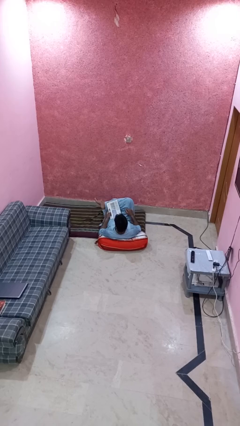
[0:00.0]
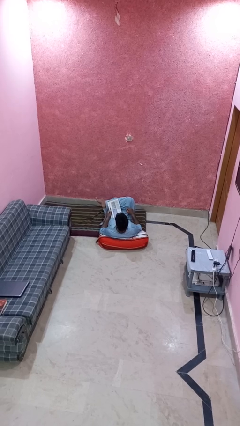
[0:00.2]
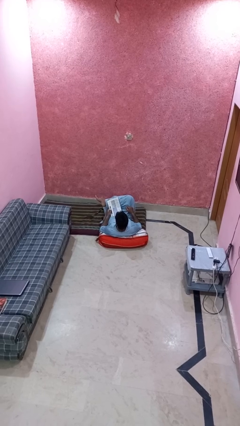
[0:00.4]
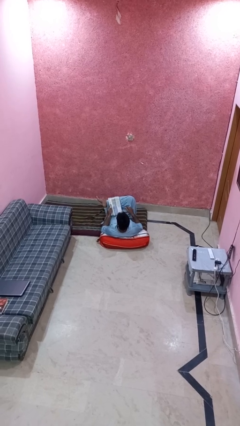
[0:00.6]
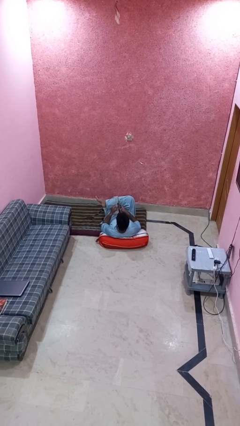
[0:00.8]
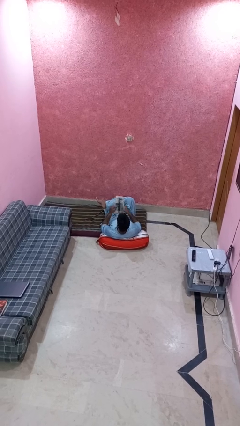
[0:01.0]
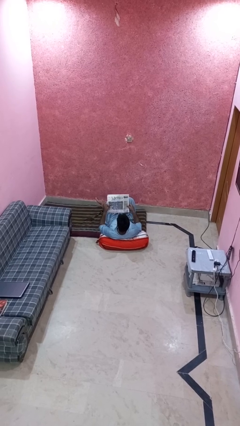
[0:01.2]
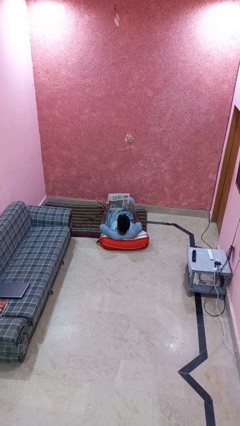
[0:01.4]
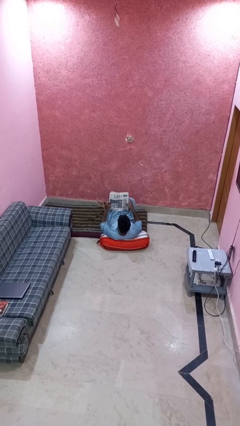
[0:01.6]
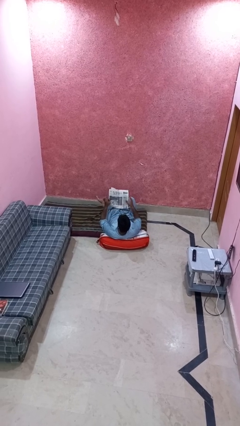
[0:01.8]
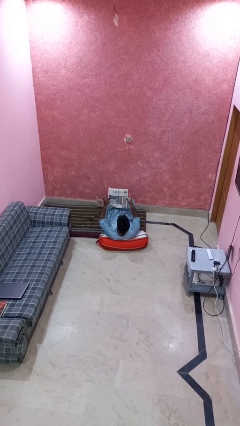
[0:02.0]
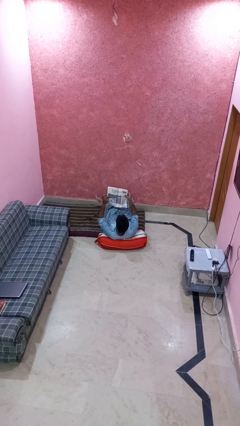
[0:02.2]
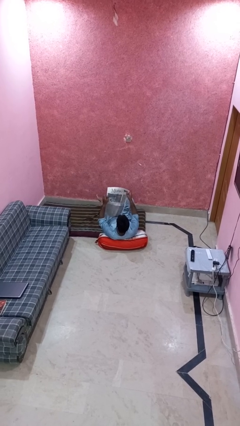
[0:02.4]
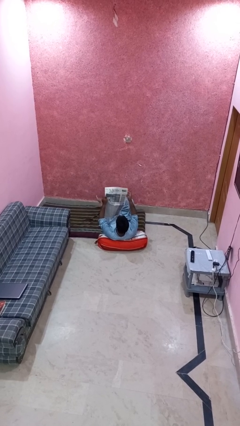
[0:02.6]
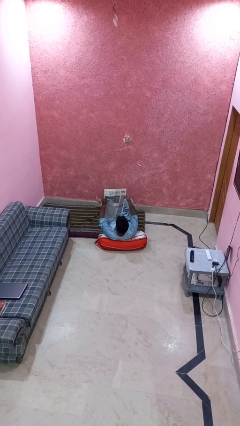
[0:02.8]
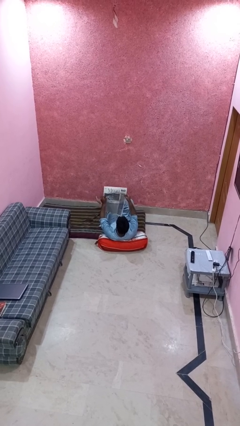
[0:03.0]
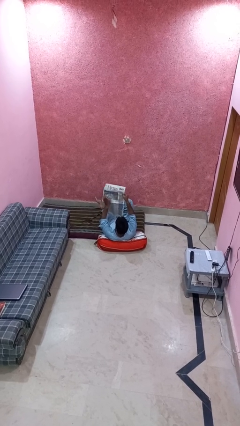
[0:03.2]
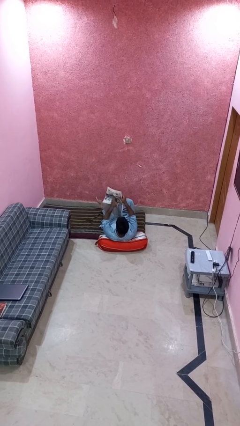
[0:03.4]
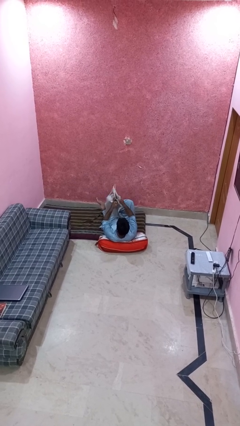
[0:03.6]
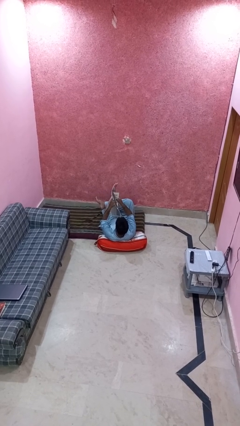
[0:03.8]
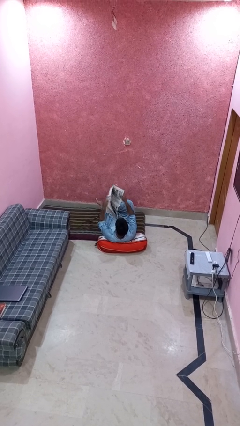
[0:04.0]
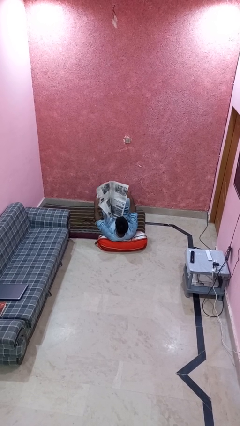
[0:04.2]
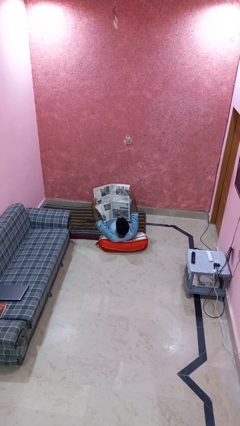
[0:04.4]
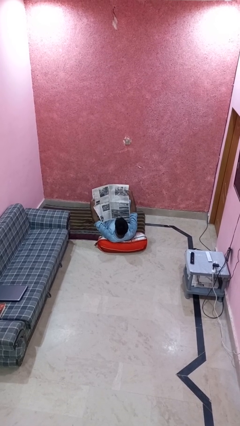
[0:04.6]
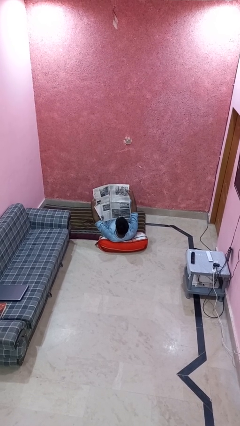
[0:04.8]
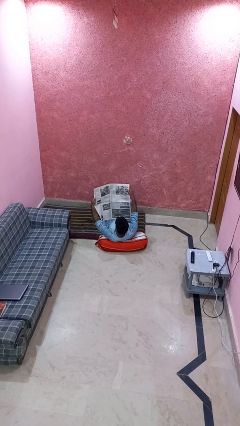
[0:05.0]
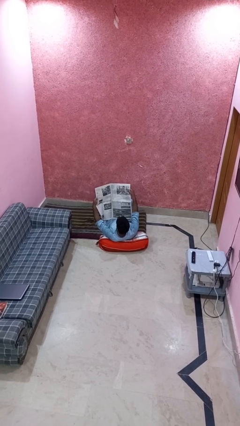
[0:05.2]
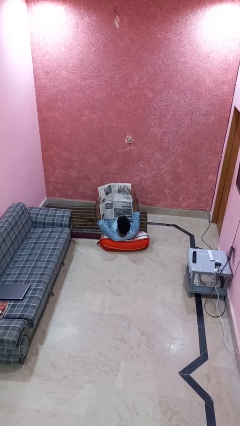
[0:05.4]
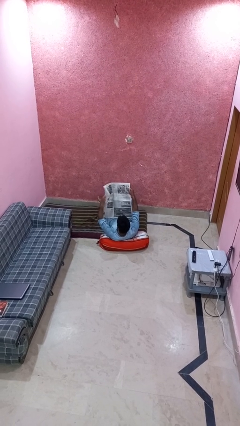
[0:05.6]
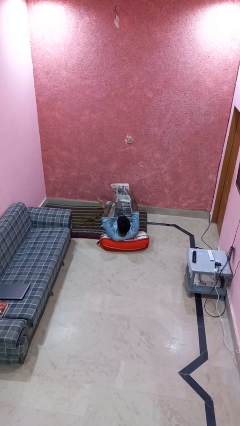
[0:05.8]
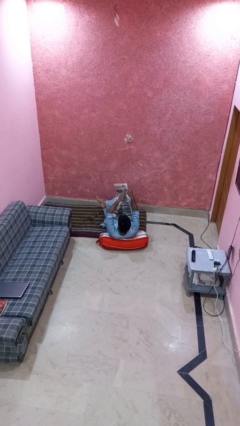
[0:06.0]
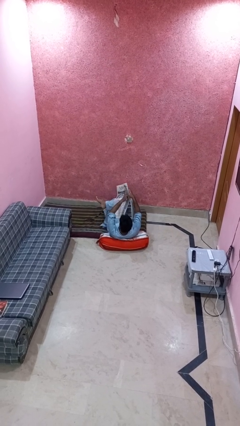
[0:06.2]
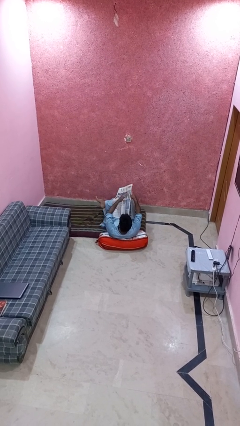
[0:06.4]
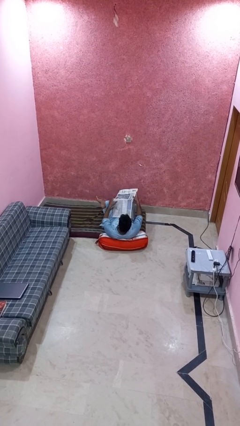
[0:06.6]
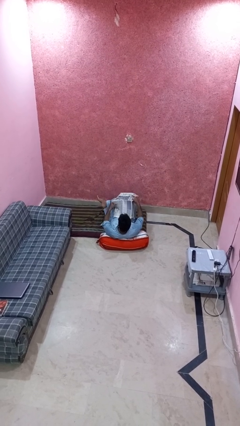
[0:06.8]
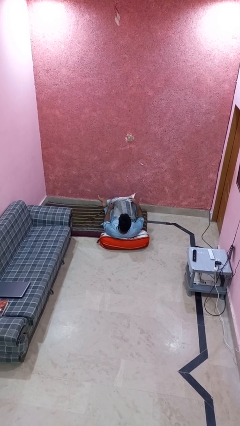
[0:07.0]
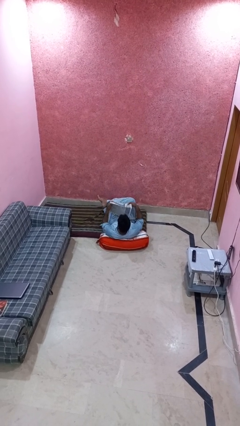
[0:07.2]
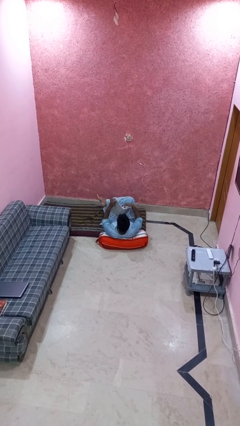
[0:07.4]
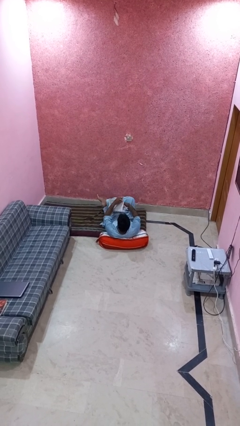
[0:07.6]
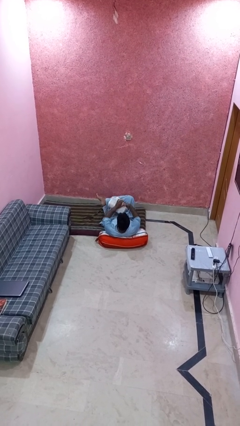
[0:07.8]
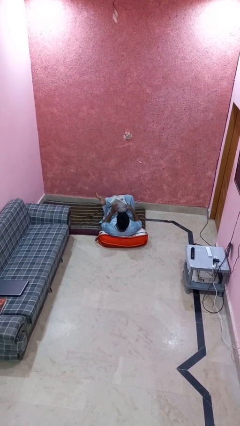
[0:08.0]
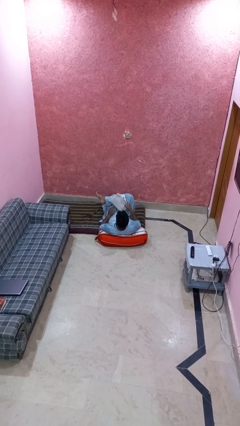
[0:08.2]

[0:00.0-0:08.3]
person reads newspaper

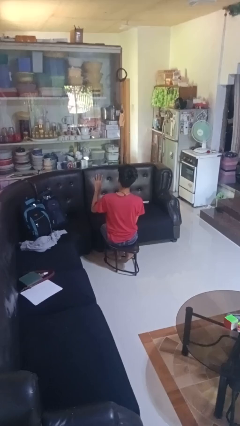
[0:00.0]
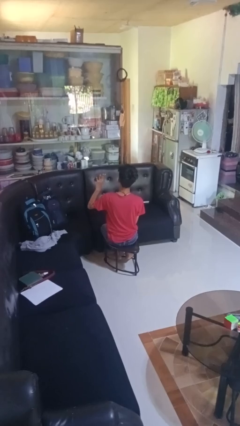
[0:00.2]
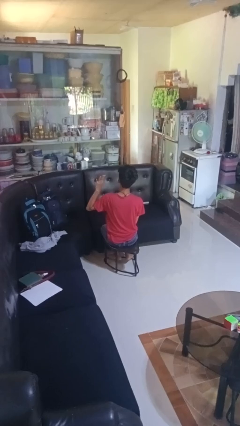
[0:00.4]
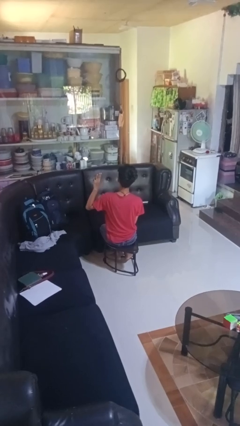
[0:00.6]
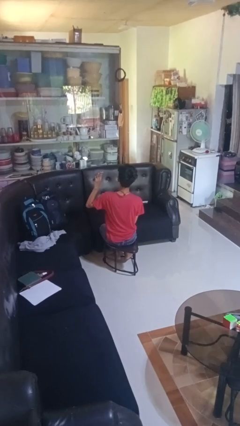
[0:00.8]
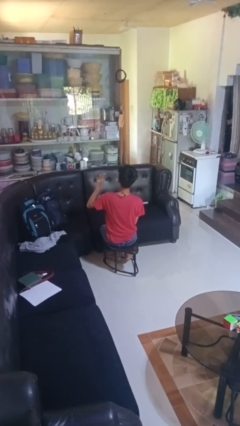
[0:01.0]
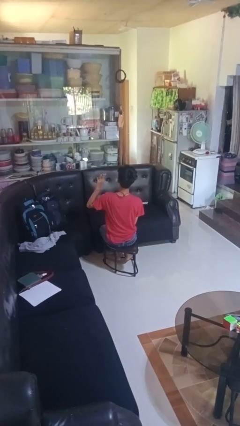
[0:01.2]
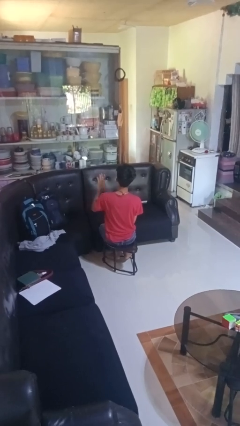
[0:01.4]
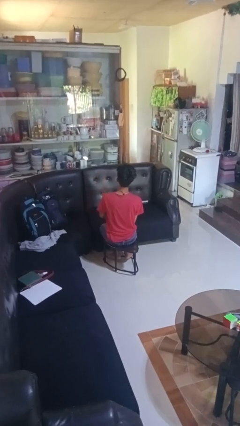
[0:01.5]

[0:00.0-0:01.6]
person gestures number four

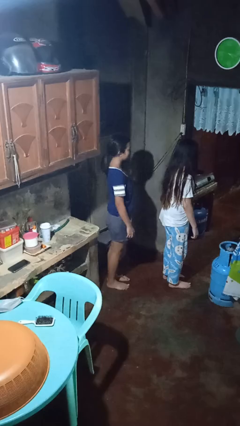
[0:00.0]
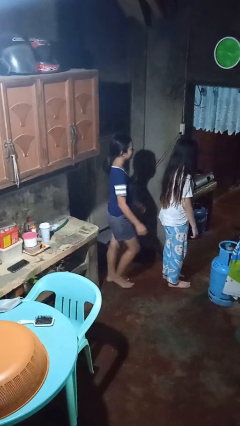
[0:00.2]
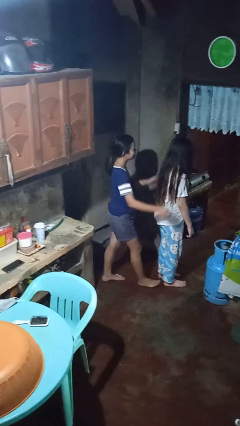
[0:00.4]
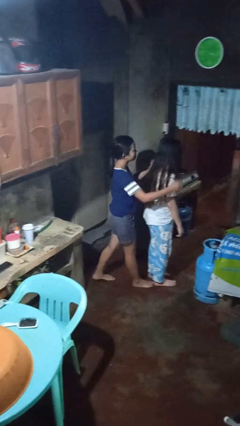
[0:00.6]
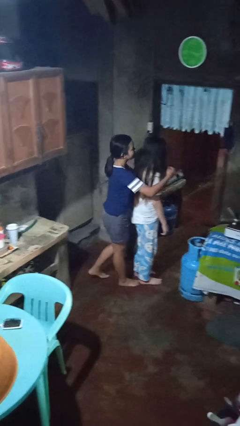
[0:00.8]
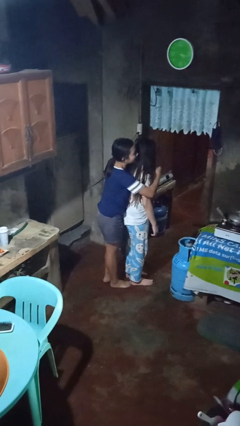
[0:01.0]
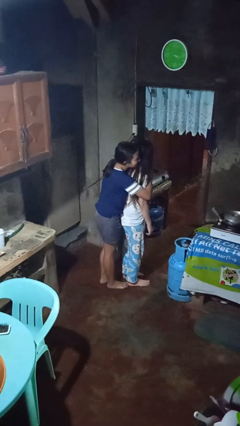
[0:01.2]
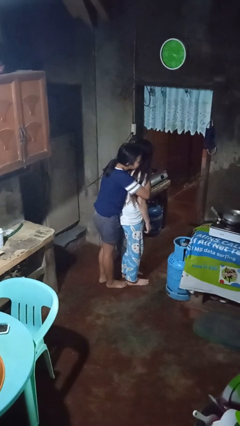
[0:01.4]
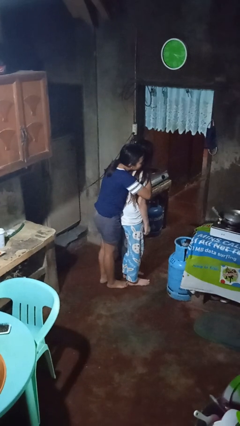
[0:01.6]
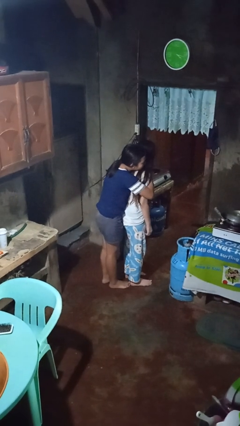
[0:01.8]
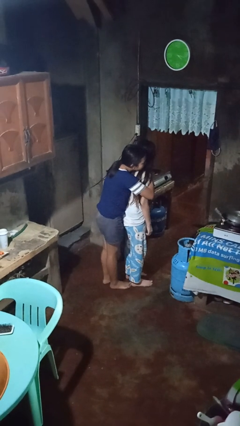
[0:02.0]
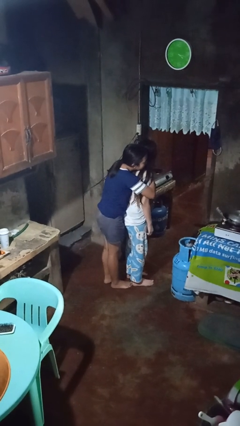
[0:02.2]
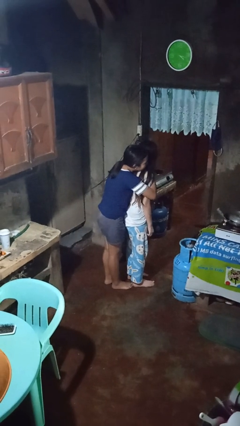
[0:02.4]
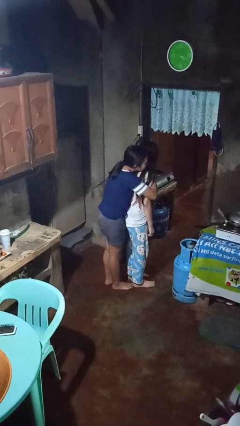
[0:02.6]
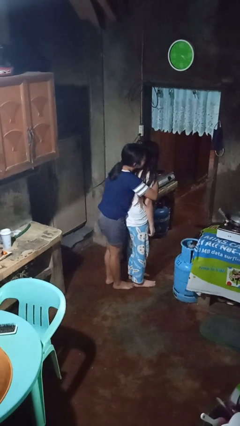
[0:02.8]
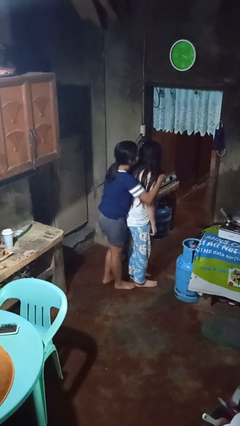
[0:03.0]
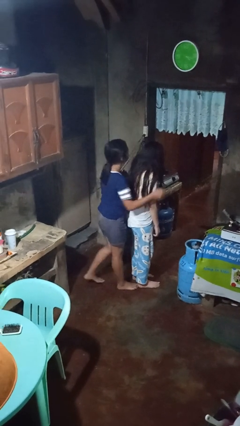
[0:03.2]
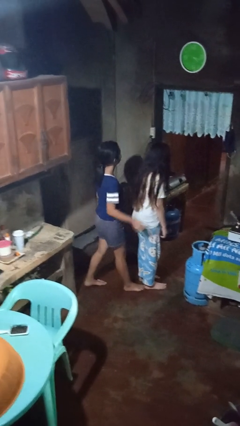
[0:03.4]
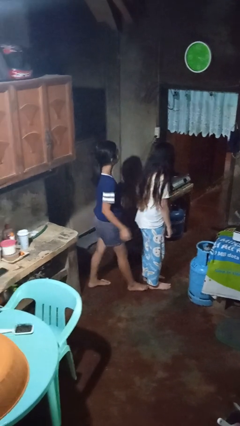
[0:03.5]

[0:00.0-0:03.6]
person hugs person from behind

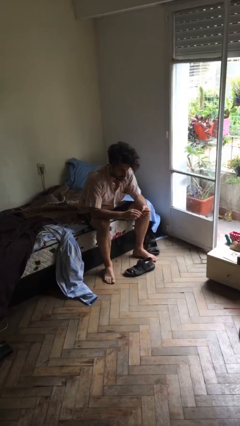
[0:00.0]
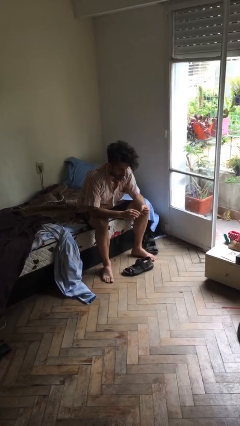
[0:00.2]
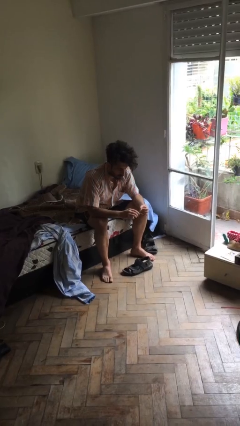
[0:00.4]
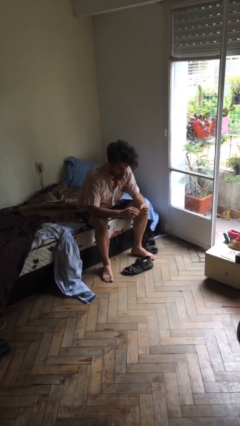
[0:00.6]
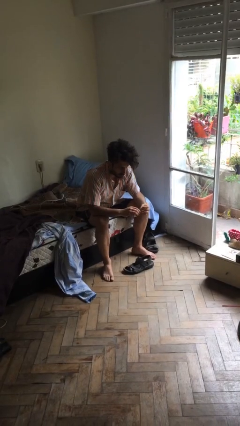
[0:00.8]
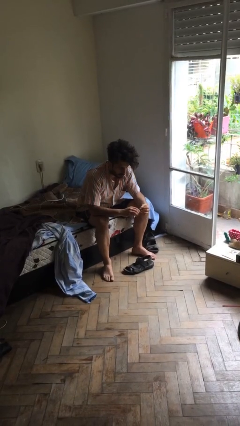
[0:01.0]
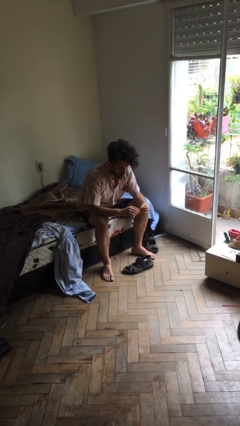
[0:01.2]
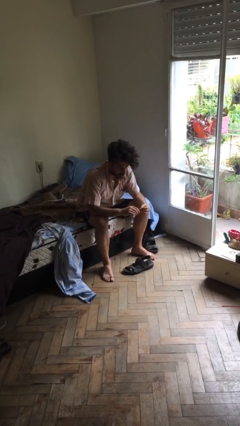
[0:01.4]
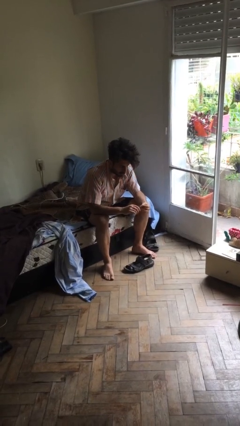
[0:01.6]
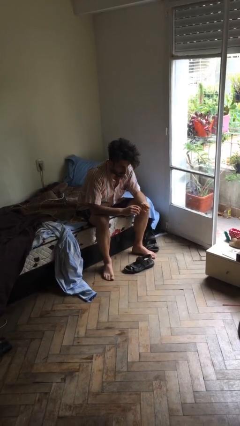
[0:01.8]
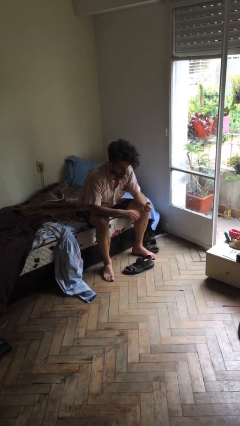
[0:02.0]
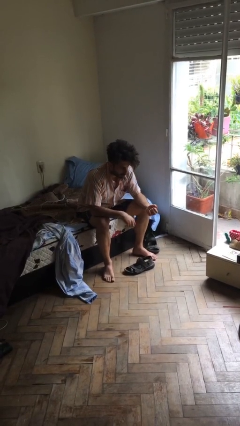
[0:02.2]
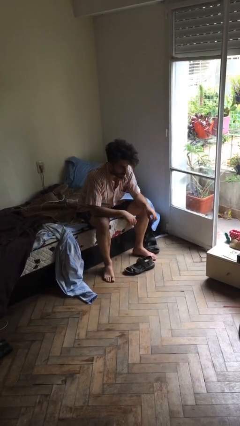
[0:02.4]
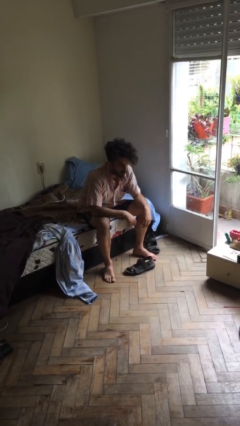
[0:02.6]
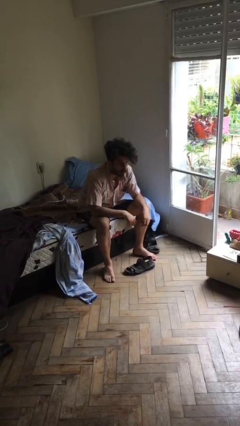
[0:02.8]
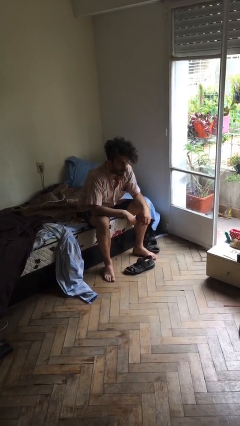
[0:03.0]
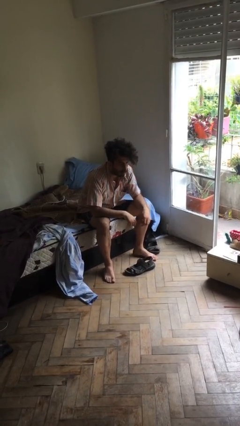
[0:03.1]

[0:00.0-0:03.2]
person clips fingernails

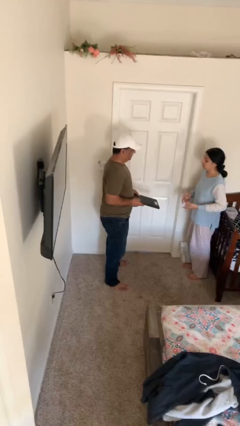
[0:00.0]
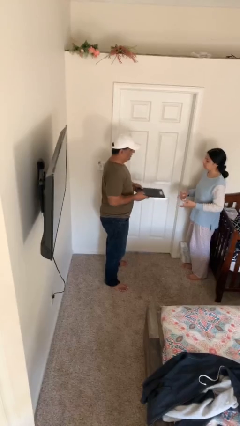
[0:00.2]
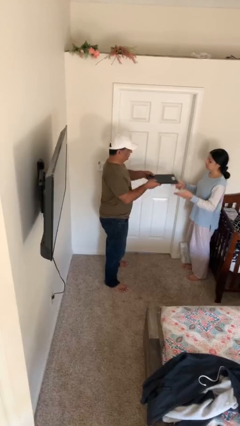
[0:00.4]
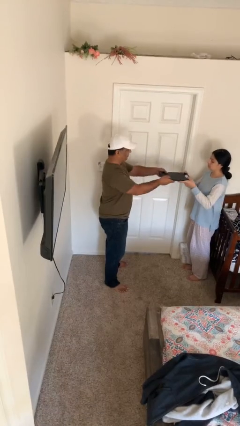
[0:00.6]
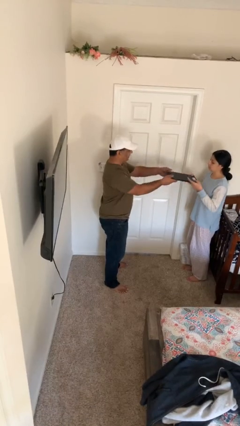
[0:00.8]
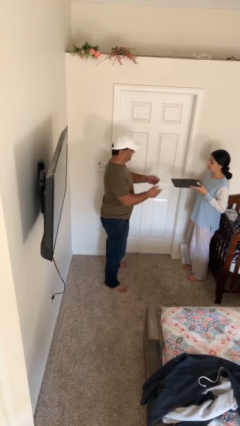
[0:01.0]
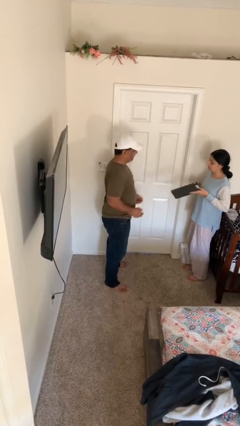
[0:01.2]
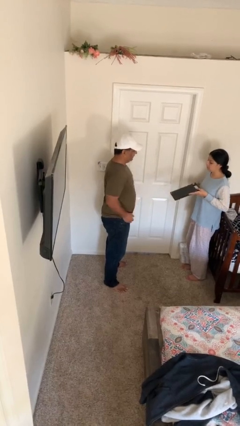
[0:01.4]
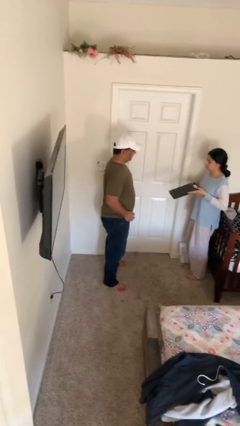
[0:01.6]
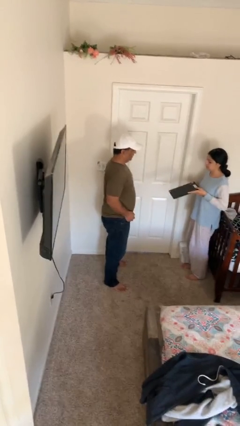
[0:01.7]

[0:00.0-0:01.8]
person transfers object to person
